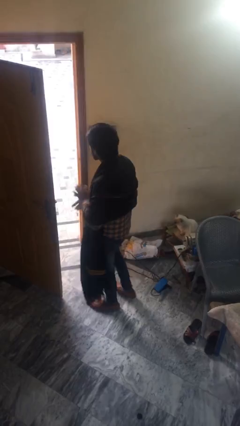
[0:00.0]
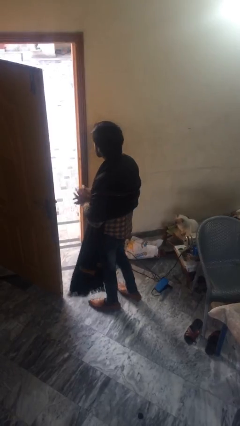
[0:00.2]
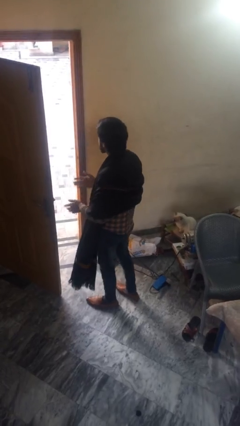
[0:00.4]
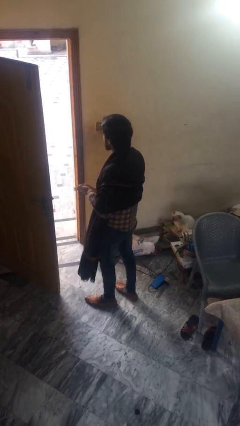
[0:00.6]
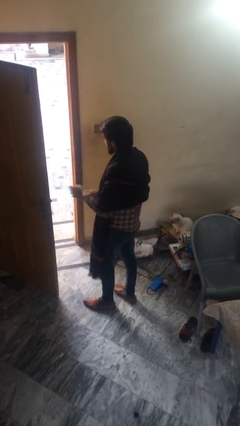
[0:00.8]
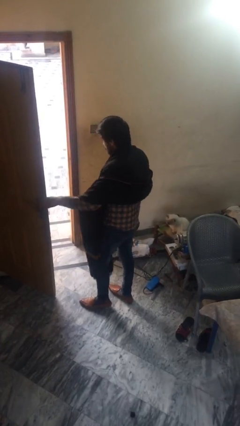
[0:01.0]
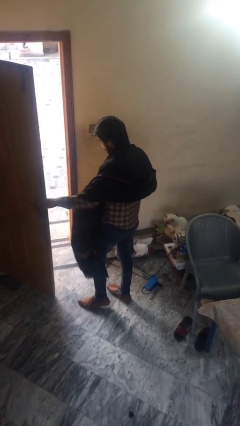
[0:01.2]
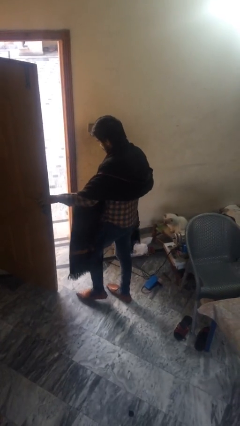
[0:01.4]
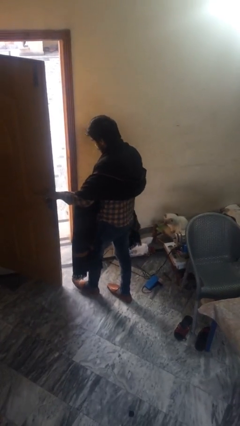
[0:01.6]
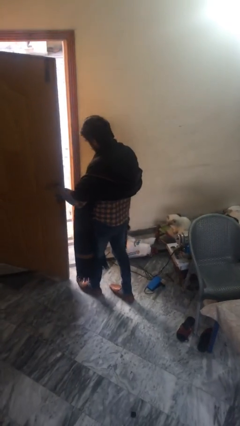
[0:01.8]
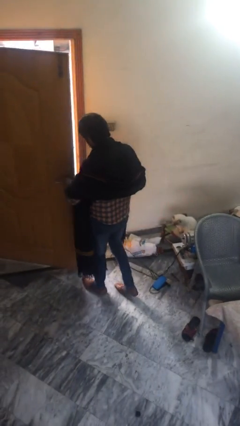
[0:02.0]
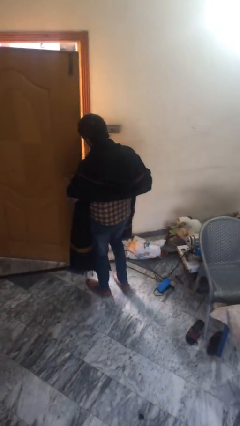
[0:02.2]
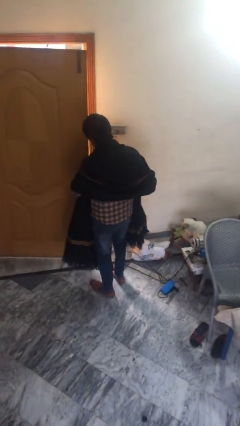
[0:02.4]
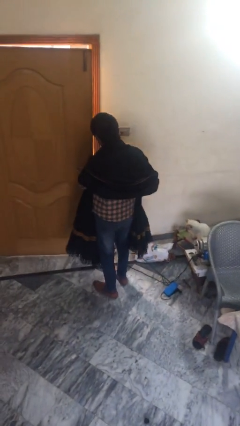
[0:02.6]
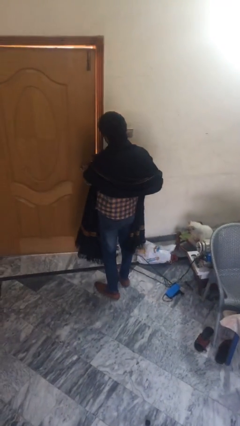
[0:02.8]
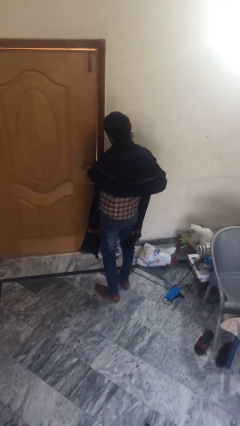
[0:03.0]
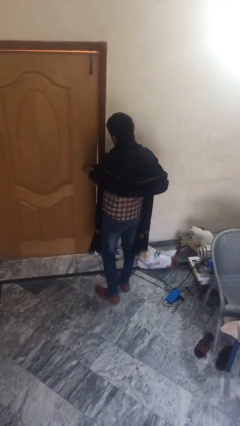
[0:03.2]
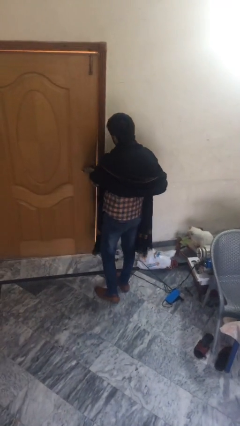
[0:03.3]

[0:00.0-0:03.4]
person closes facility door

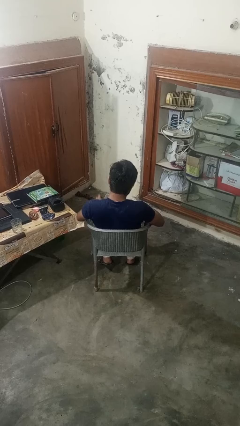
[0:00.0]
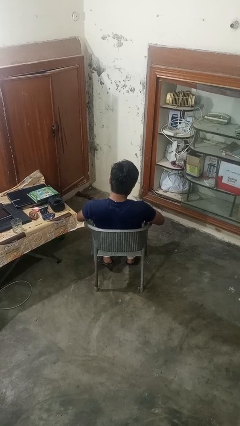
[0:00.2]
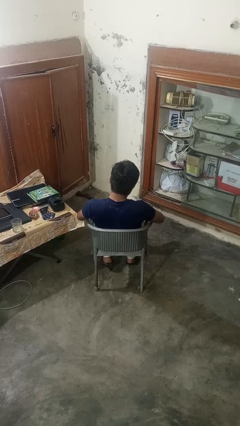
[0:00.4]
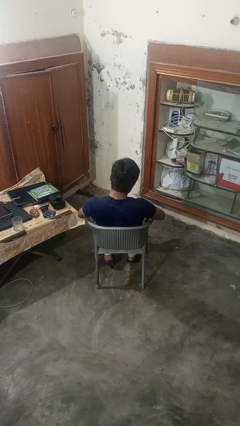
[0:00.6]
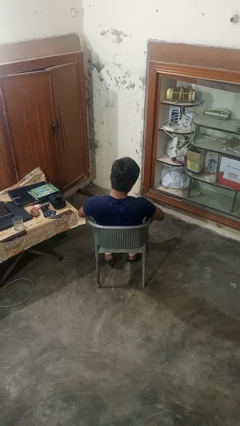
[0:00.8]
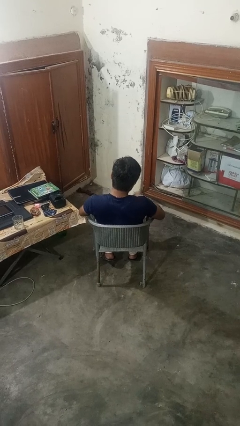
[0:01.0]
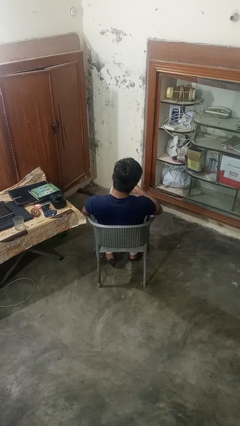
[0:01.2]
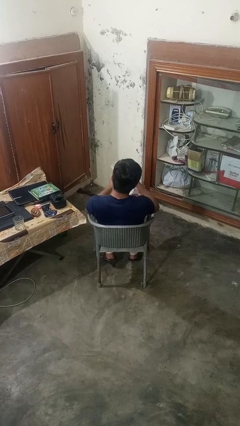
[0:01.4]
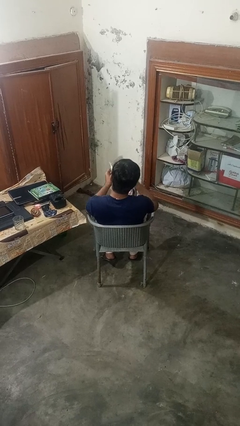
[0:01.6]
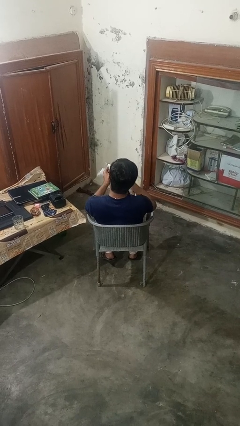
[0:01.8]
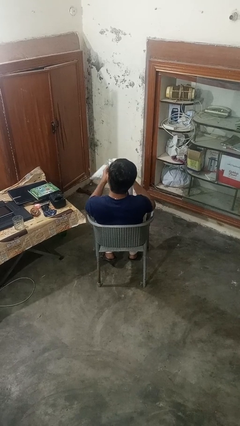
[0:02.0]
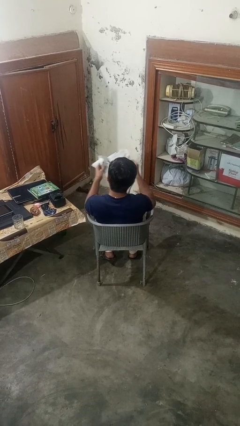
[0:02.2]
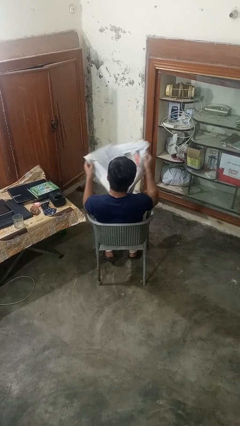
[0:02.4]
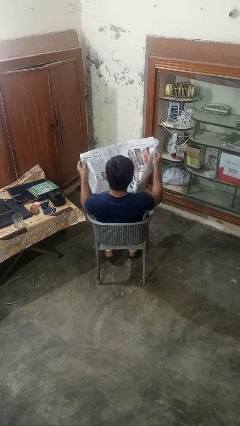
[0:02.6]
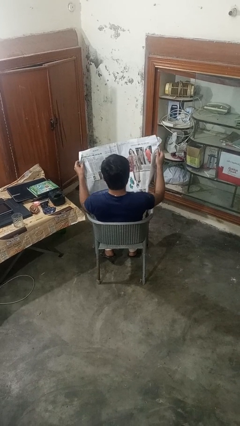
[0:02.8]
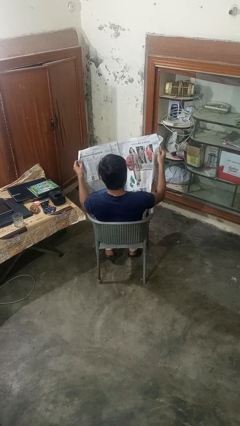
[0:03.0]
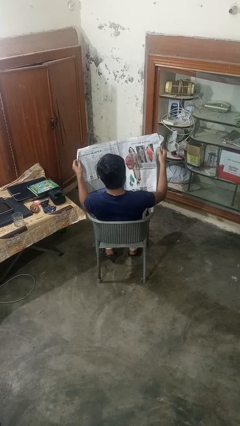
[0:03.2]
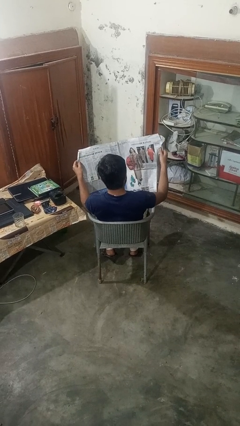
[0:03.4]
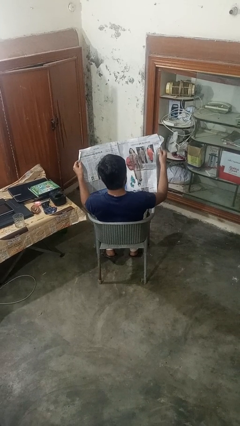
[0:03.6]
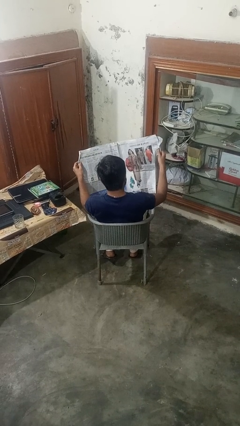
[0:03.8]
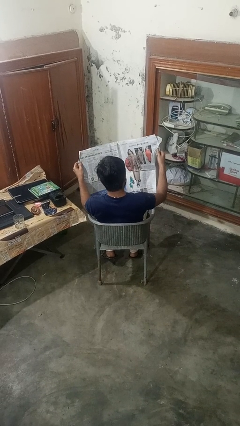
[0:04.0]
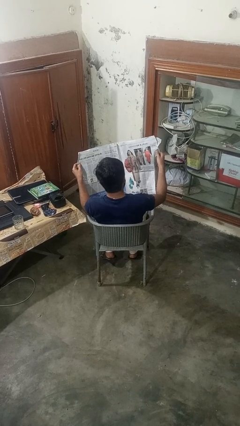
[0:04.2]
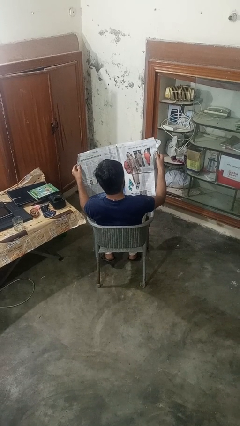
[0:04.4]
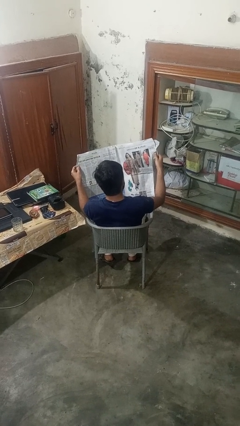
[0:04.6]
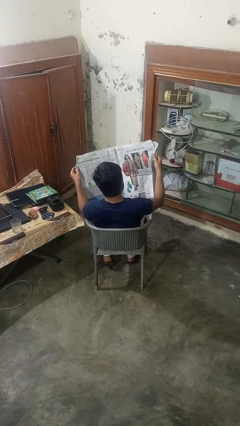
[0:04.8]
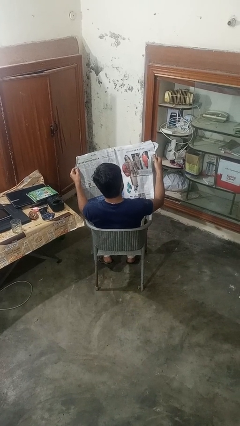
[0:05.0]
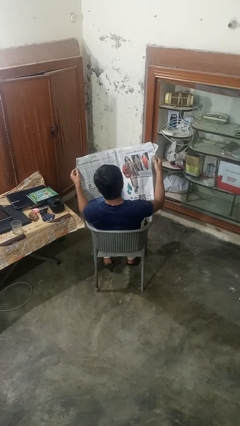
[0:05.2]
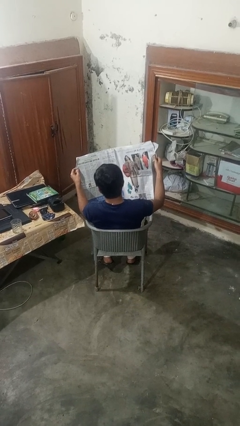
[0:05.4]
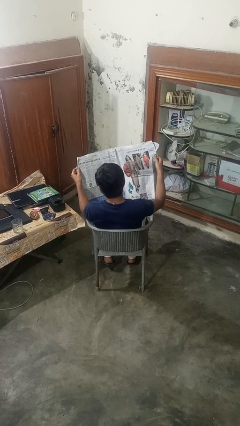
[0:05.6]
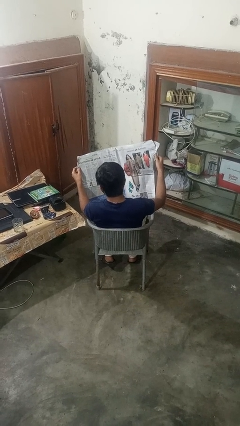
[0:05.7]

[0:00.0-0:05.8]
person reads newspaper

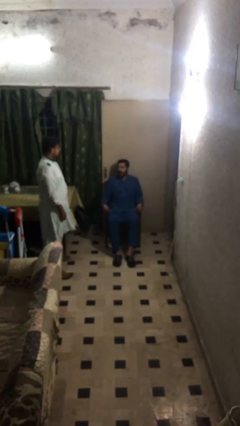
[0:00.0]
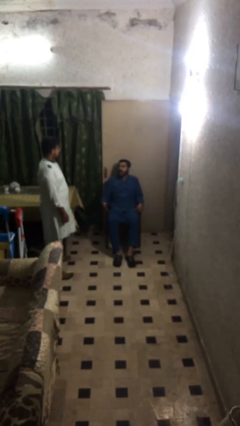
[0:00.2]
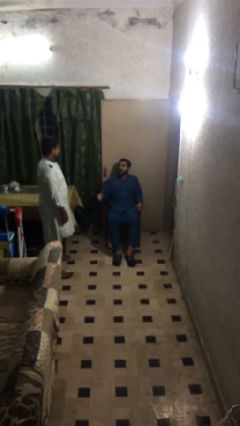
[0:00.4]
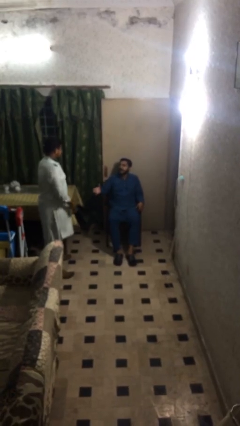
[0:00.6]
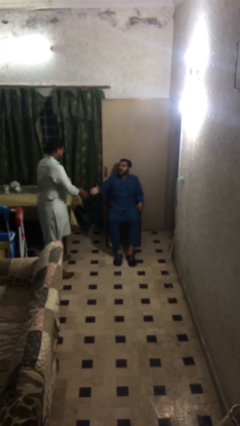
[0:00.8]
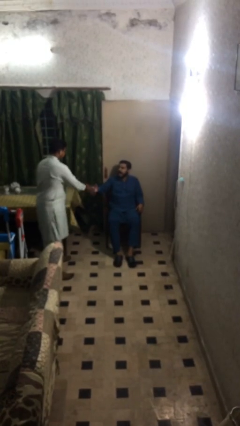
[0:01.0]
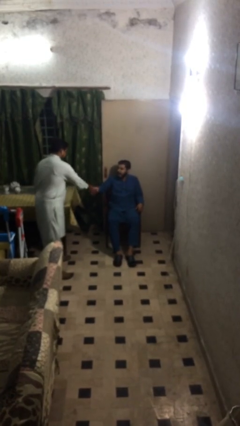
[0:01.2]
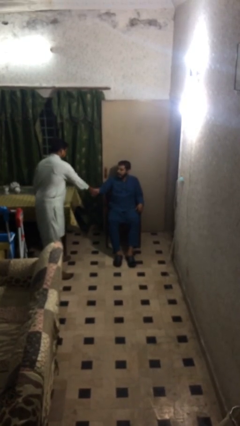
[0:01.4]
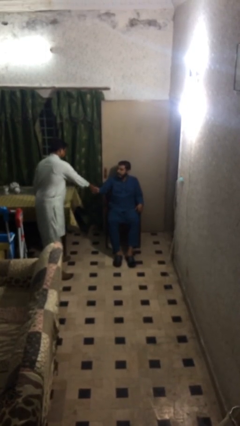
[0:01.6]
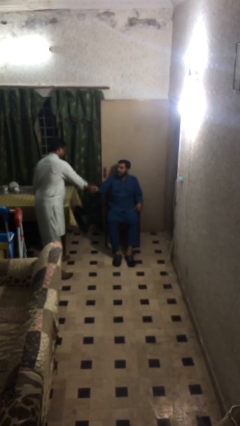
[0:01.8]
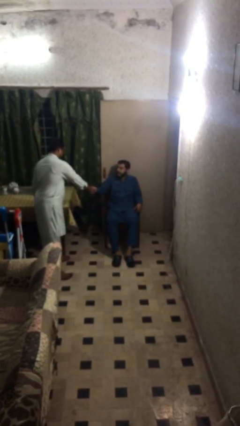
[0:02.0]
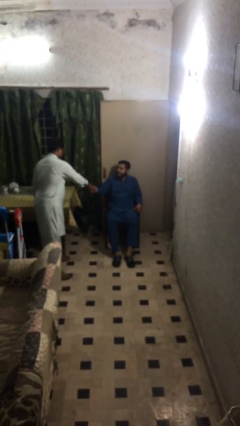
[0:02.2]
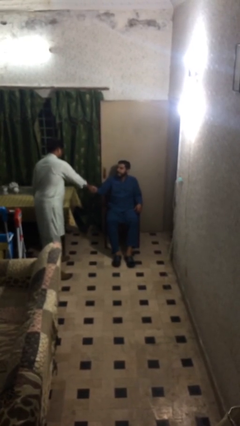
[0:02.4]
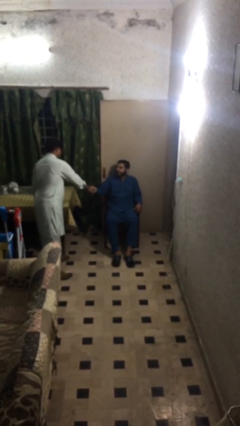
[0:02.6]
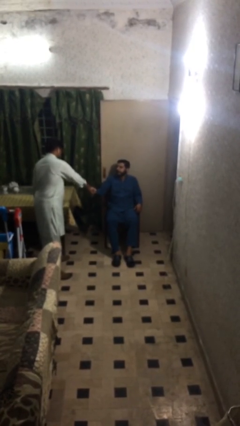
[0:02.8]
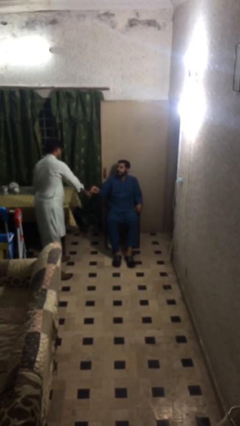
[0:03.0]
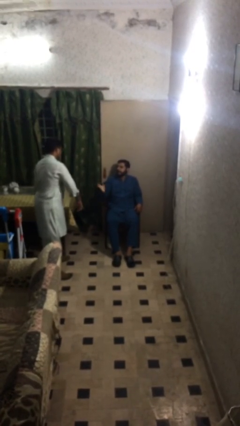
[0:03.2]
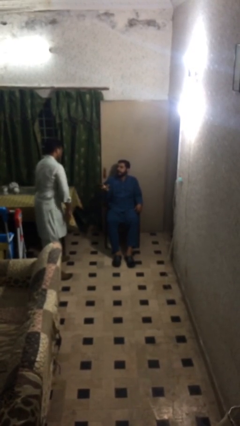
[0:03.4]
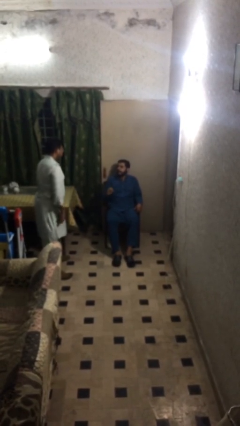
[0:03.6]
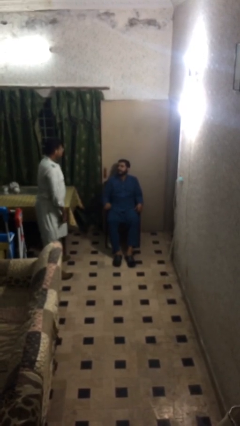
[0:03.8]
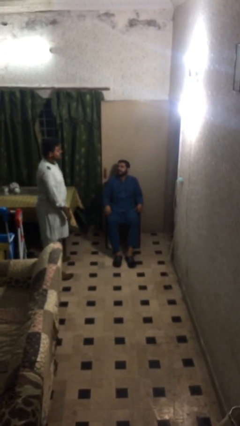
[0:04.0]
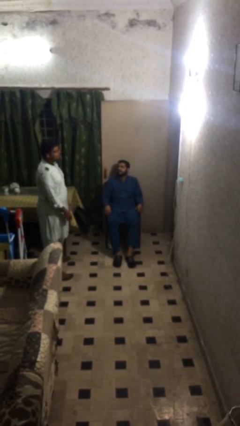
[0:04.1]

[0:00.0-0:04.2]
person shakes hand

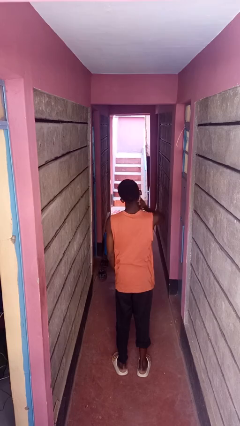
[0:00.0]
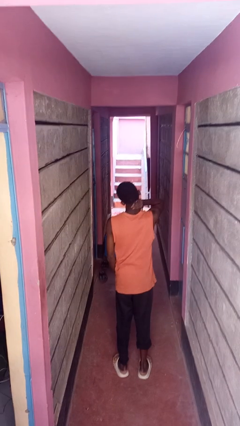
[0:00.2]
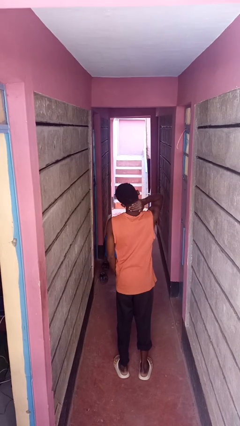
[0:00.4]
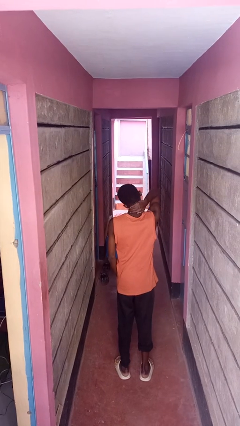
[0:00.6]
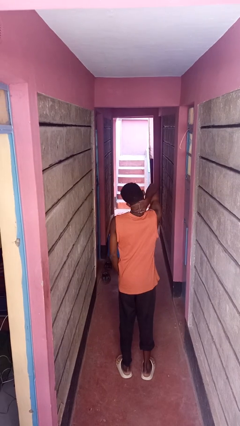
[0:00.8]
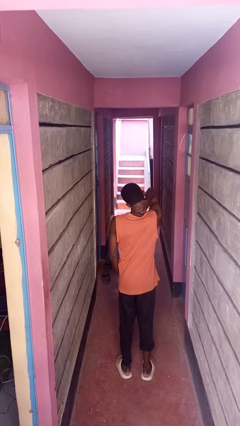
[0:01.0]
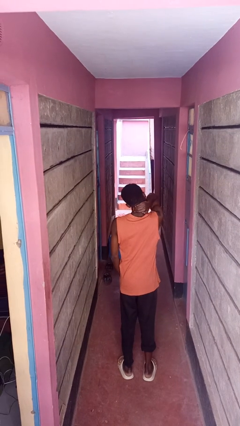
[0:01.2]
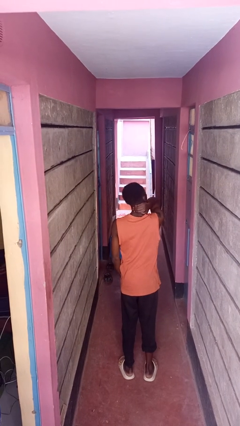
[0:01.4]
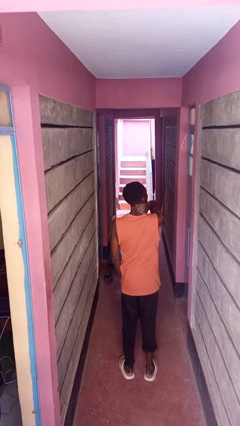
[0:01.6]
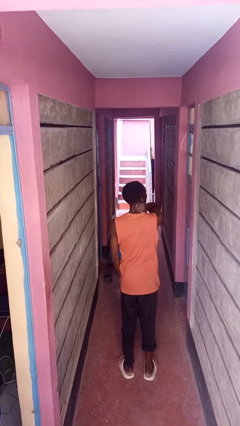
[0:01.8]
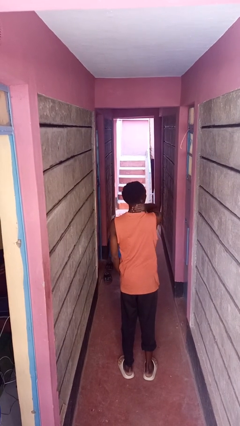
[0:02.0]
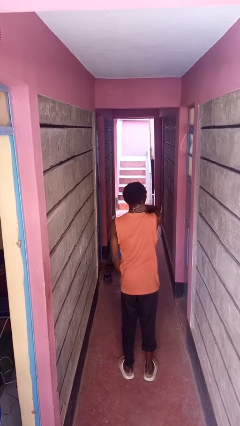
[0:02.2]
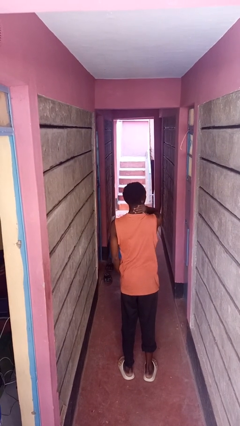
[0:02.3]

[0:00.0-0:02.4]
person rubs neck

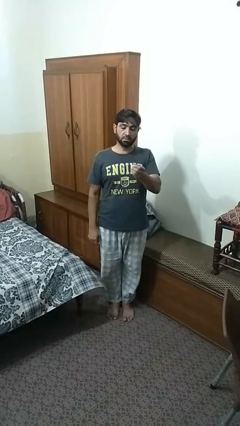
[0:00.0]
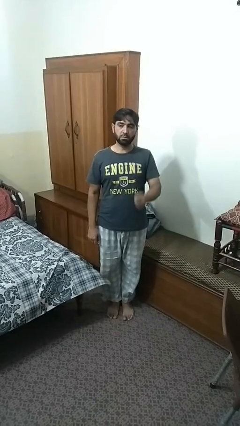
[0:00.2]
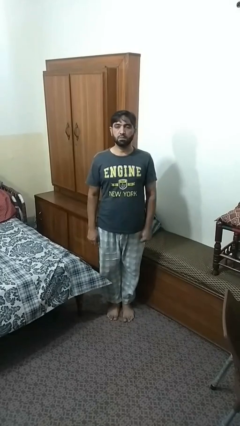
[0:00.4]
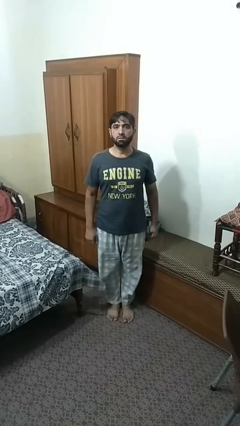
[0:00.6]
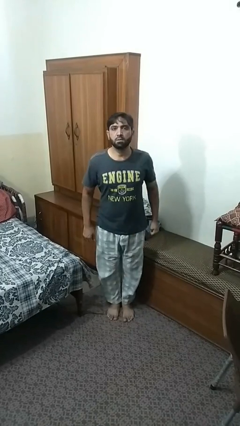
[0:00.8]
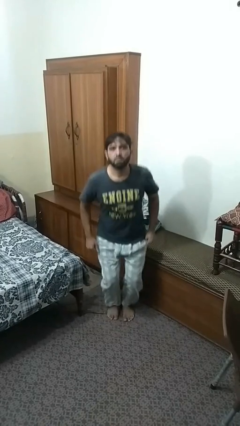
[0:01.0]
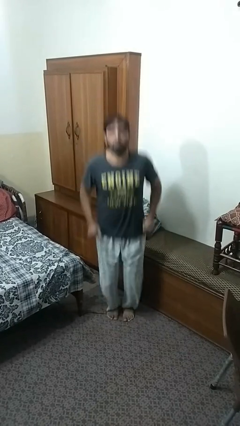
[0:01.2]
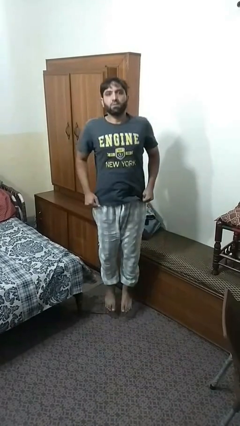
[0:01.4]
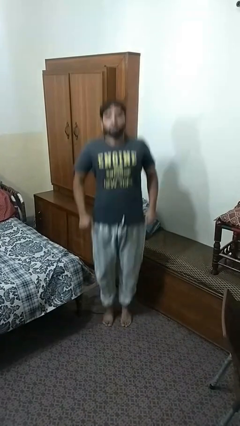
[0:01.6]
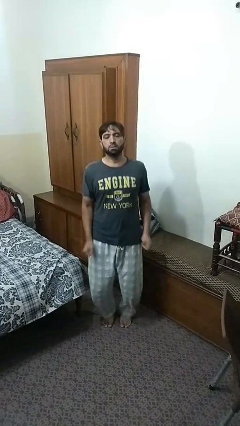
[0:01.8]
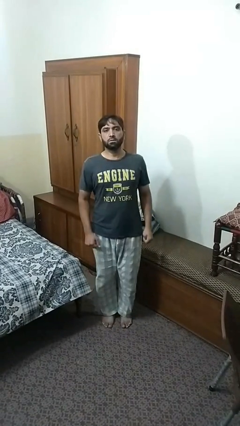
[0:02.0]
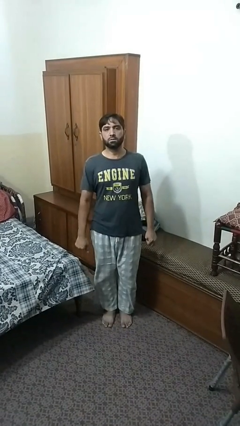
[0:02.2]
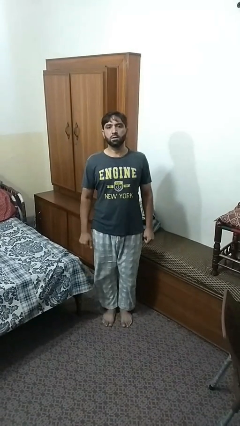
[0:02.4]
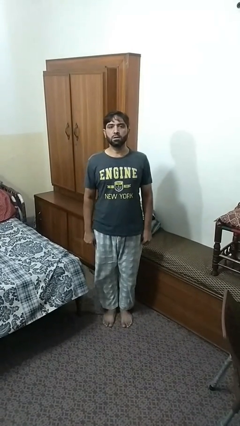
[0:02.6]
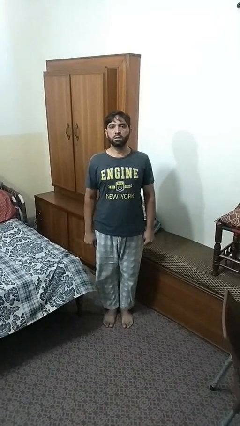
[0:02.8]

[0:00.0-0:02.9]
person jumps
